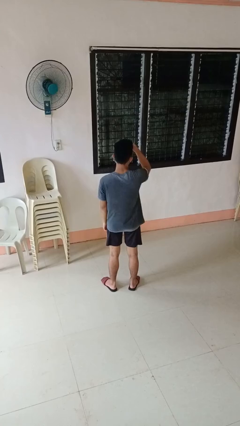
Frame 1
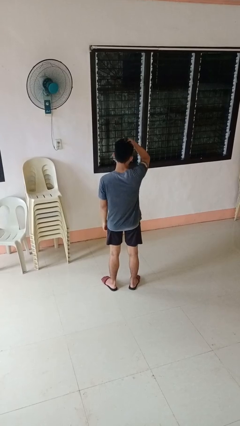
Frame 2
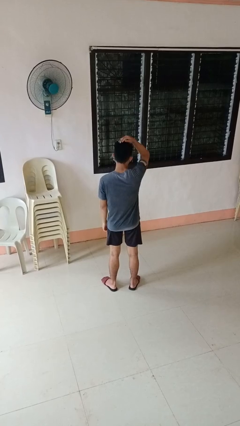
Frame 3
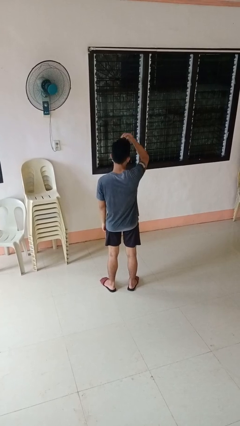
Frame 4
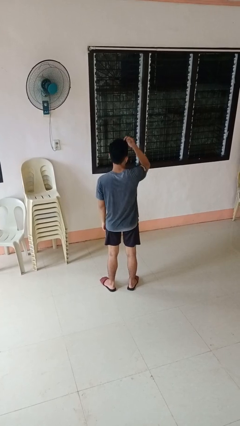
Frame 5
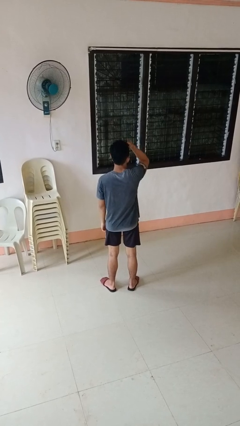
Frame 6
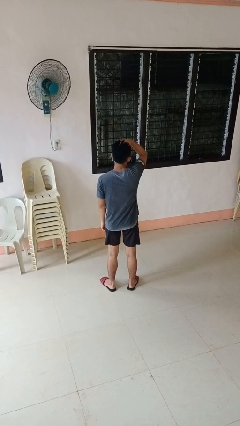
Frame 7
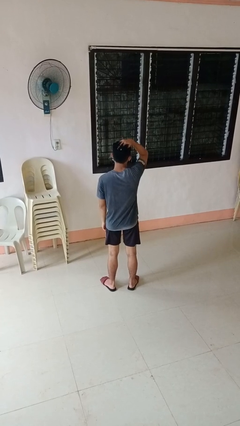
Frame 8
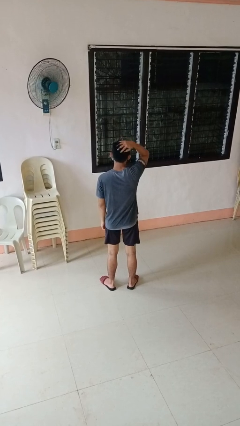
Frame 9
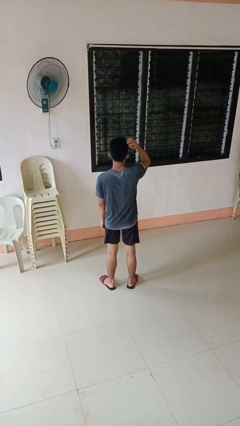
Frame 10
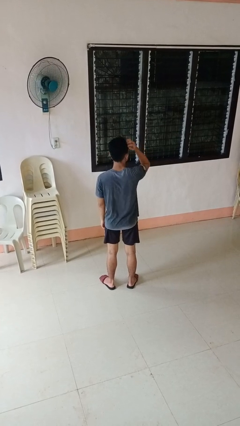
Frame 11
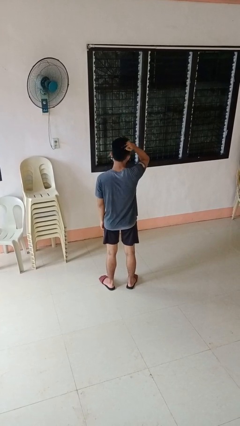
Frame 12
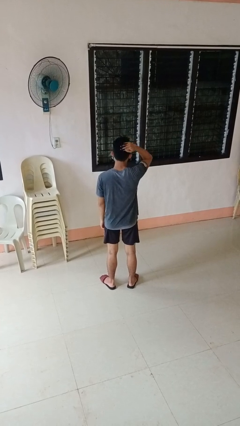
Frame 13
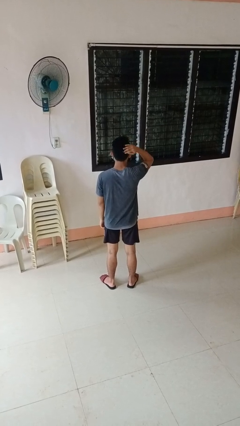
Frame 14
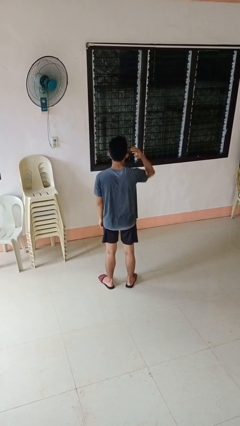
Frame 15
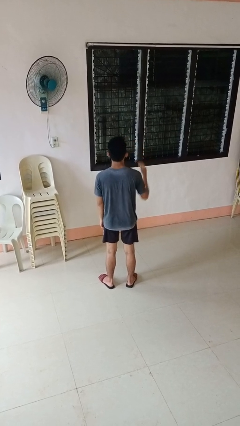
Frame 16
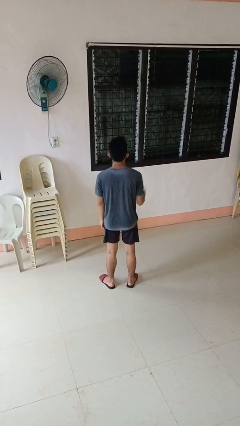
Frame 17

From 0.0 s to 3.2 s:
person strokes hair

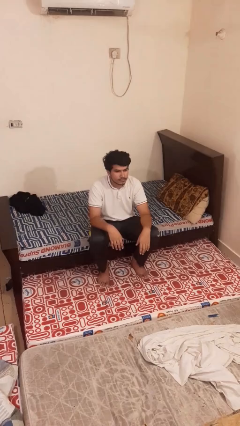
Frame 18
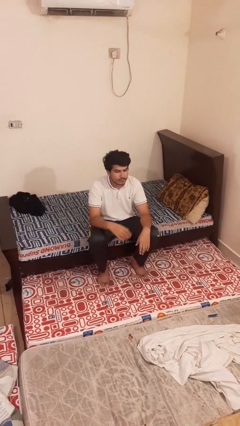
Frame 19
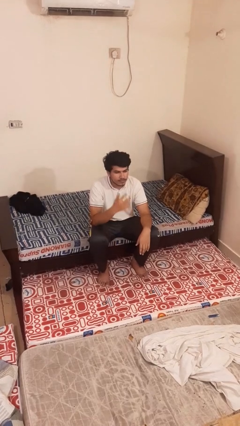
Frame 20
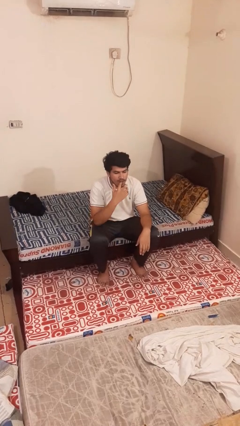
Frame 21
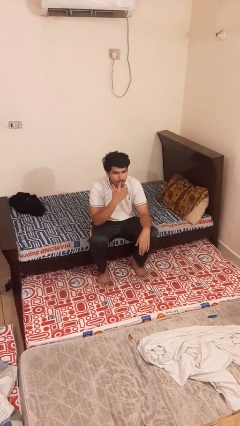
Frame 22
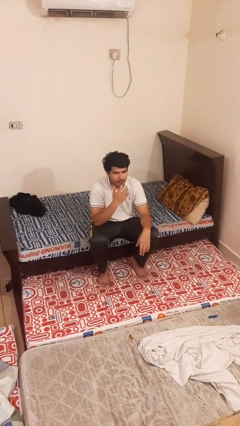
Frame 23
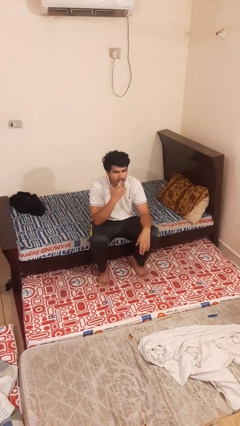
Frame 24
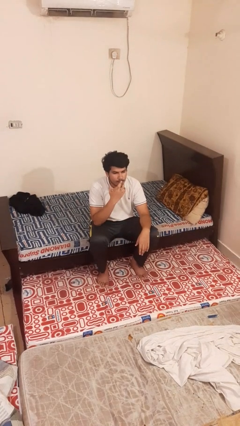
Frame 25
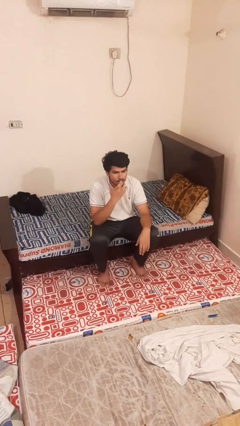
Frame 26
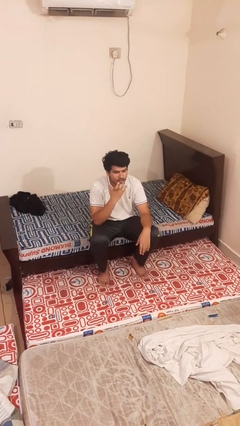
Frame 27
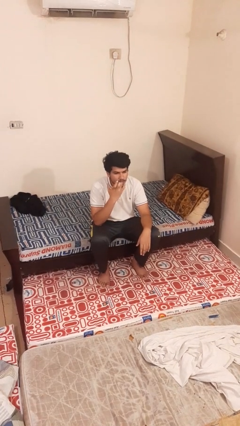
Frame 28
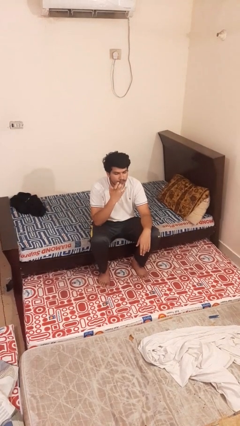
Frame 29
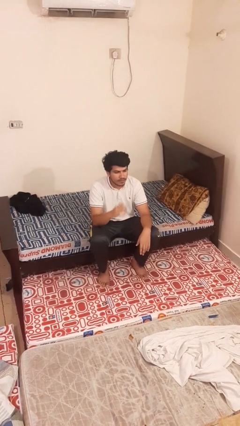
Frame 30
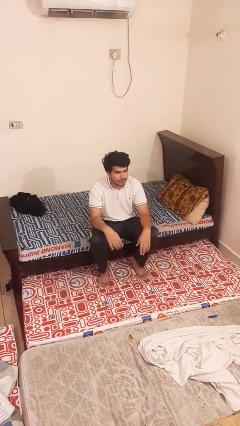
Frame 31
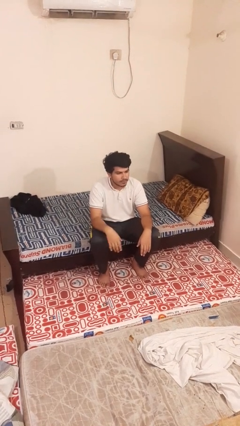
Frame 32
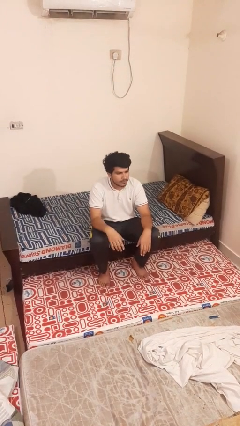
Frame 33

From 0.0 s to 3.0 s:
person licks fingers

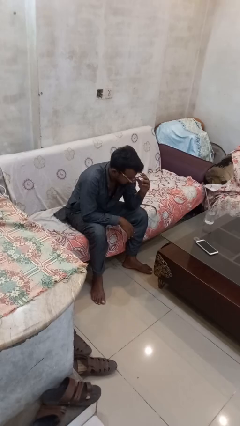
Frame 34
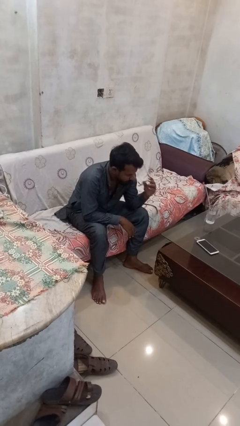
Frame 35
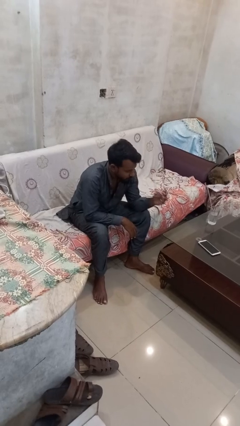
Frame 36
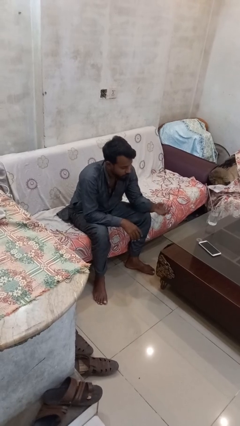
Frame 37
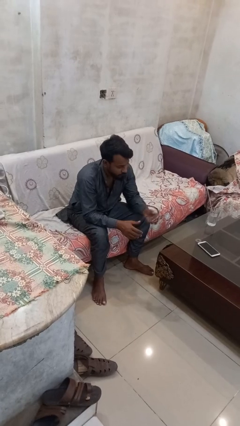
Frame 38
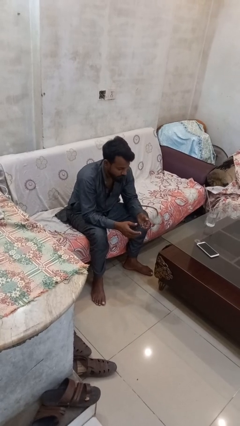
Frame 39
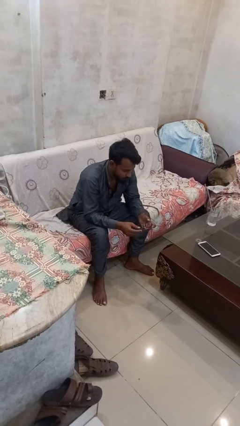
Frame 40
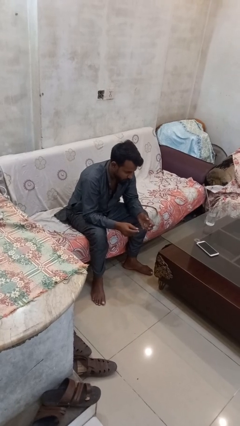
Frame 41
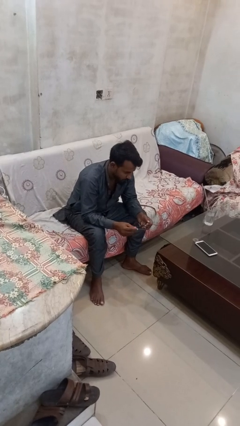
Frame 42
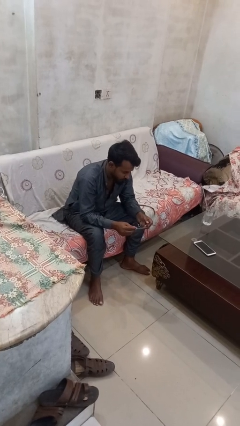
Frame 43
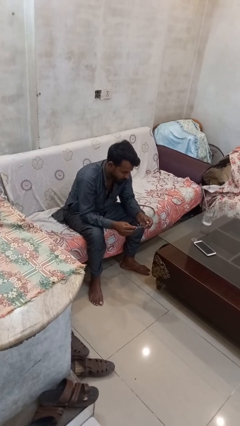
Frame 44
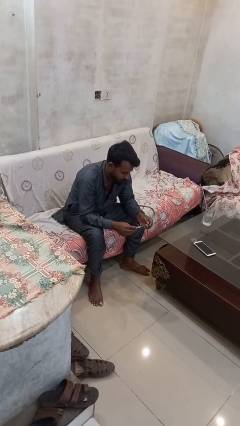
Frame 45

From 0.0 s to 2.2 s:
person takes off glasses

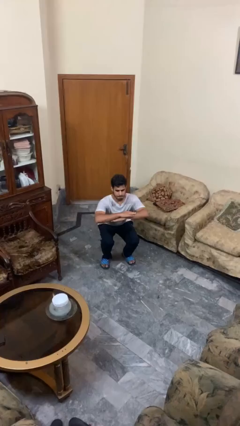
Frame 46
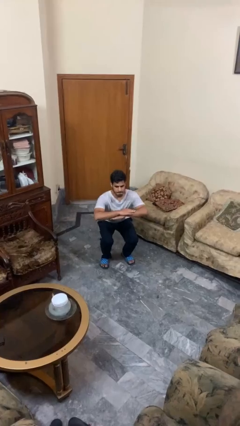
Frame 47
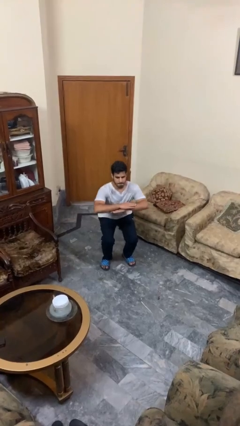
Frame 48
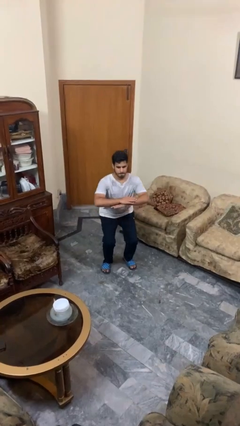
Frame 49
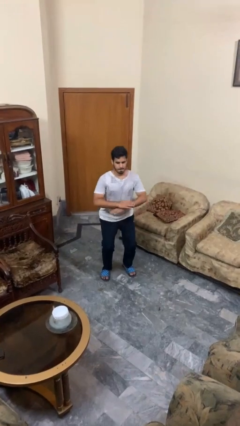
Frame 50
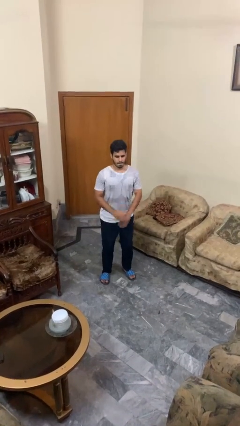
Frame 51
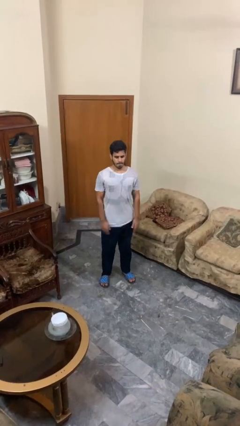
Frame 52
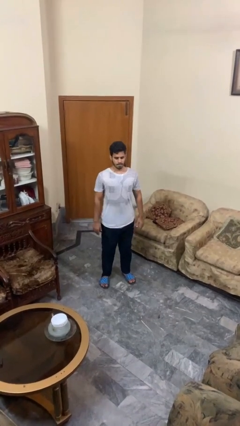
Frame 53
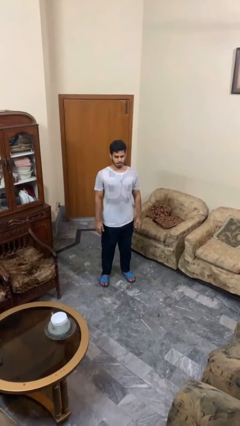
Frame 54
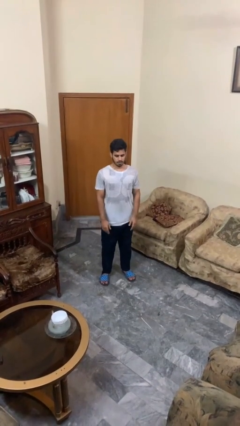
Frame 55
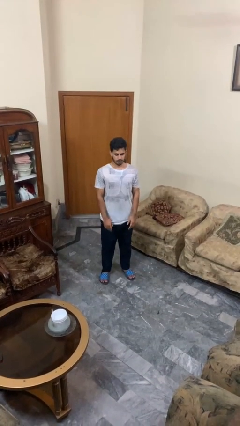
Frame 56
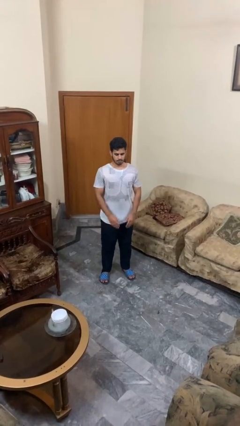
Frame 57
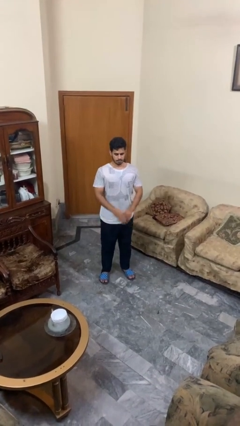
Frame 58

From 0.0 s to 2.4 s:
person stands up

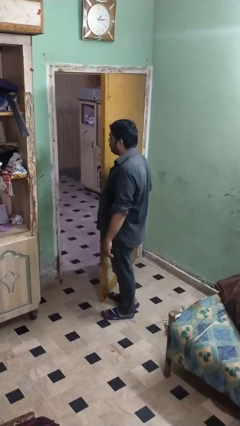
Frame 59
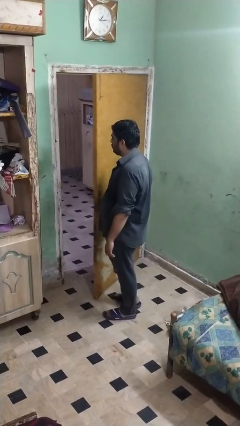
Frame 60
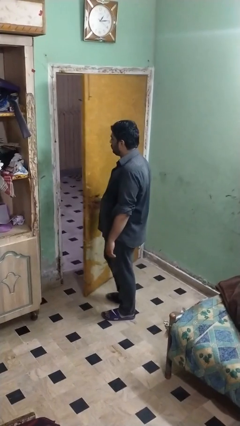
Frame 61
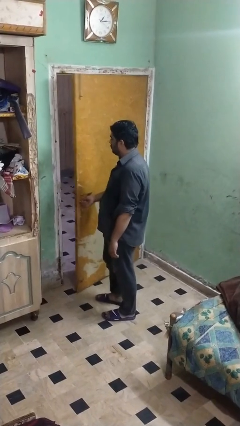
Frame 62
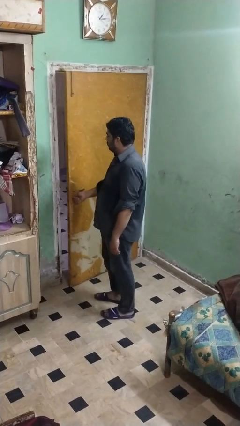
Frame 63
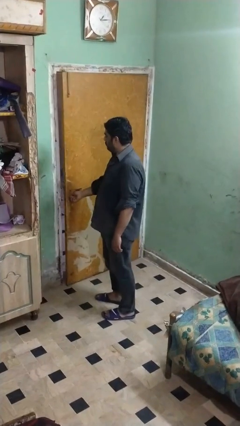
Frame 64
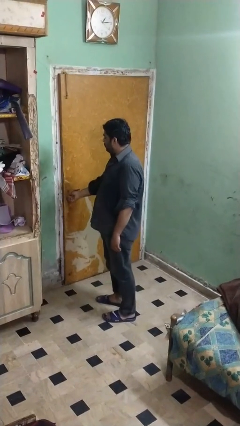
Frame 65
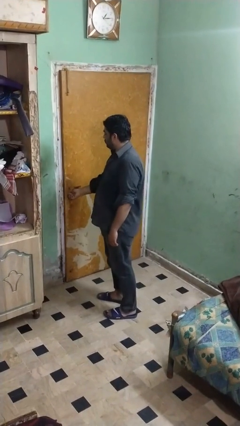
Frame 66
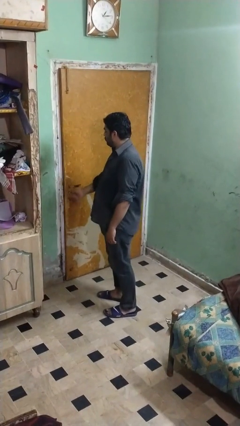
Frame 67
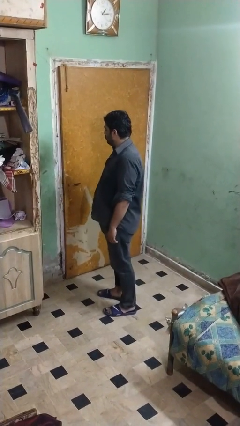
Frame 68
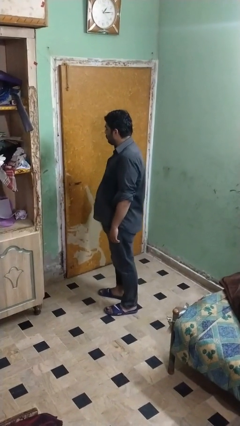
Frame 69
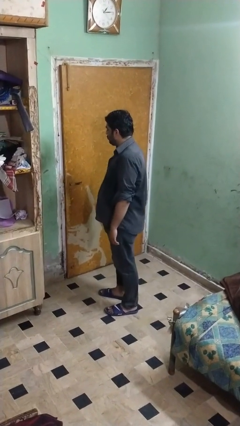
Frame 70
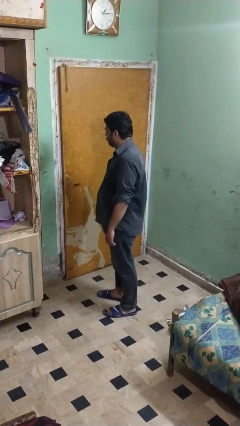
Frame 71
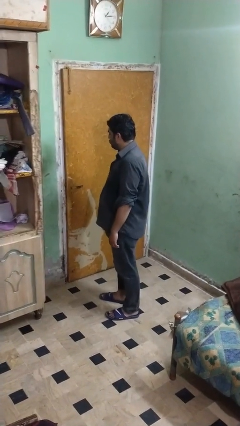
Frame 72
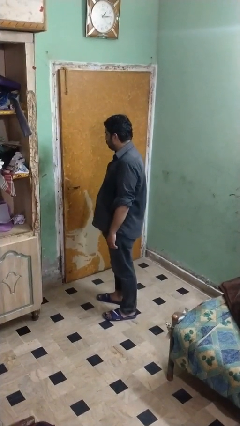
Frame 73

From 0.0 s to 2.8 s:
person closes facility door

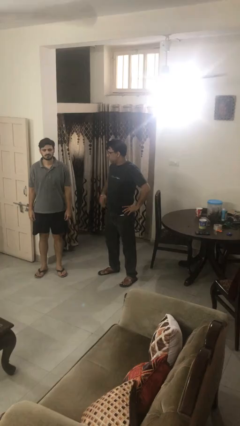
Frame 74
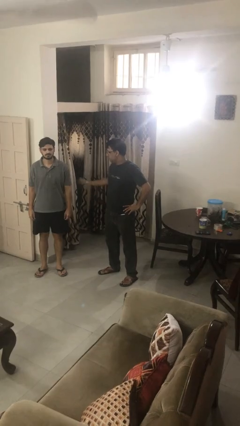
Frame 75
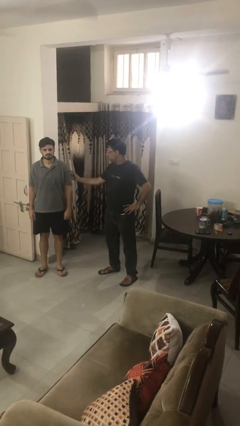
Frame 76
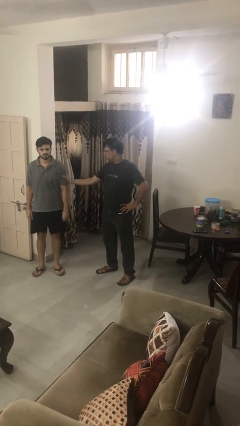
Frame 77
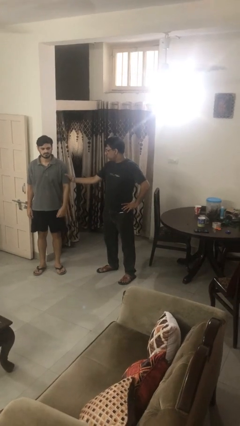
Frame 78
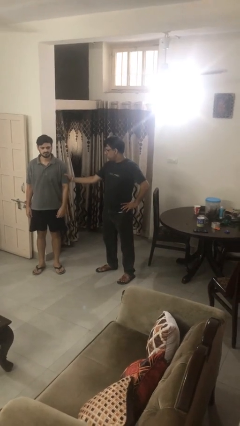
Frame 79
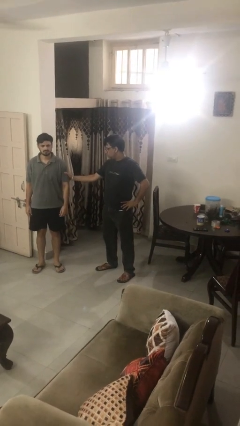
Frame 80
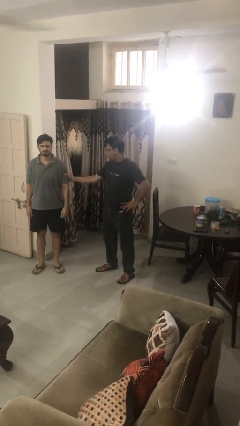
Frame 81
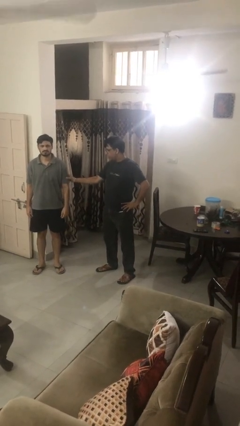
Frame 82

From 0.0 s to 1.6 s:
person grabs person by bicep

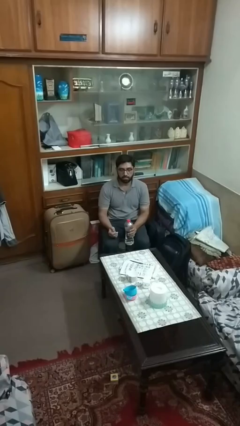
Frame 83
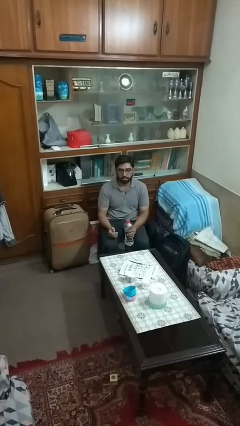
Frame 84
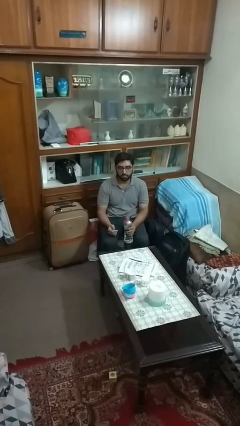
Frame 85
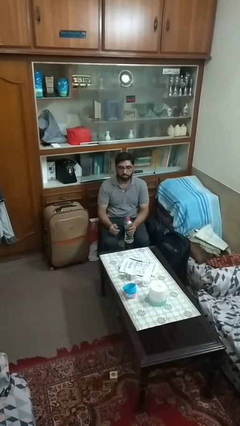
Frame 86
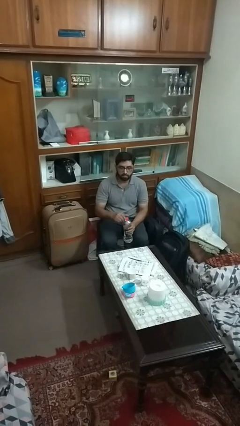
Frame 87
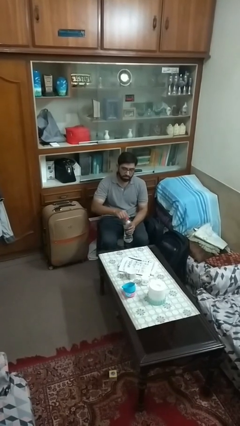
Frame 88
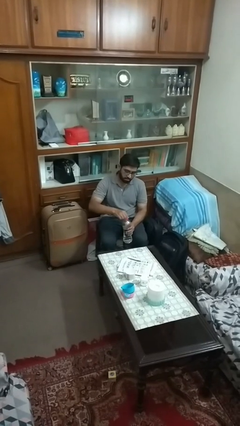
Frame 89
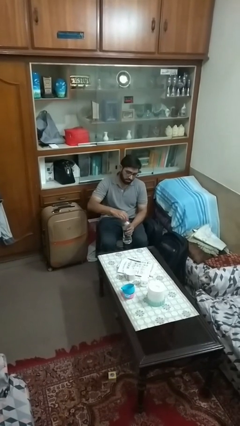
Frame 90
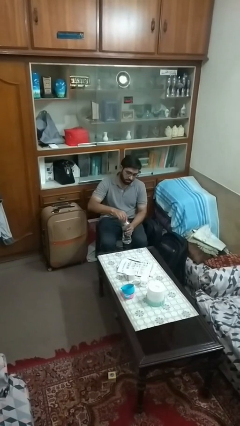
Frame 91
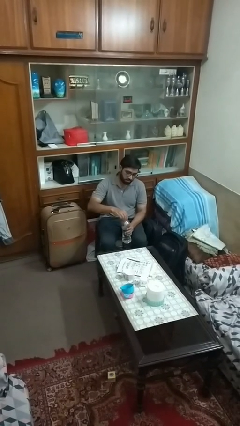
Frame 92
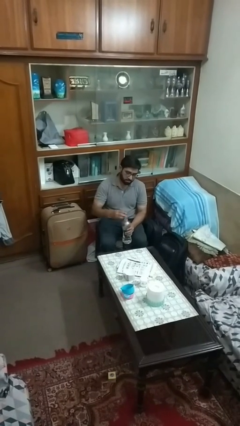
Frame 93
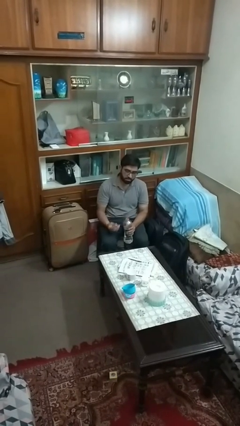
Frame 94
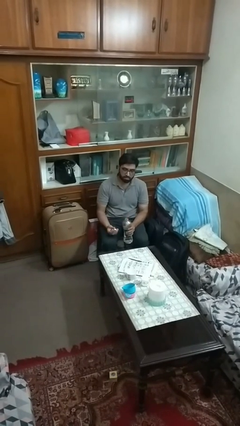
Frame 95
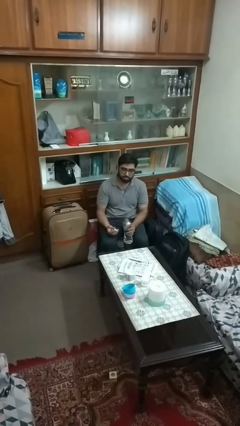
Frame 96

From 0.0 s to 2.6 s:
person unscrews lid from bottle
